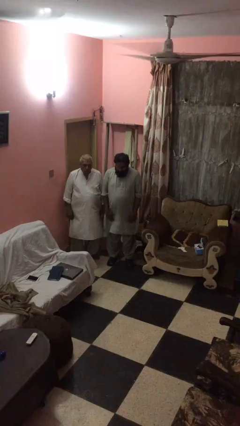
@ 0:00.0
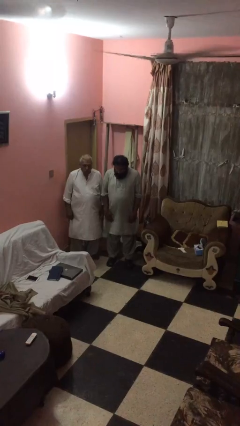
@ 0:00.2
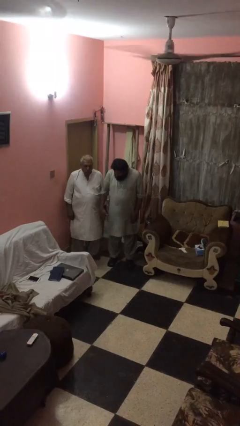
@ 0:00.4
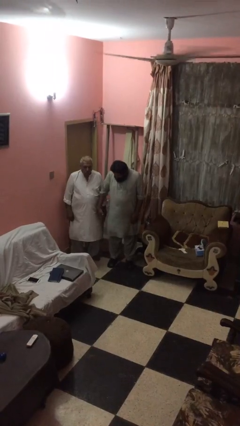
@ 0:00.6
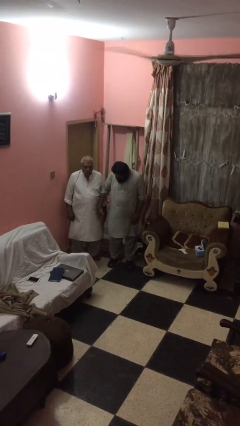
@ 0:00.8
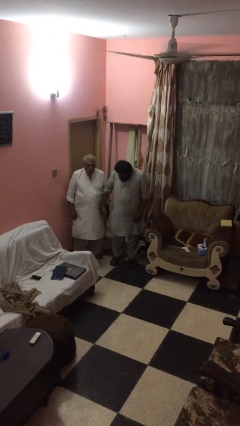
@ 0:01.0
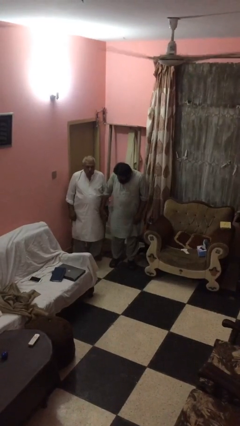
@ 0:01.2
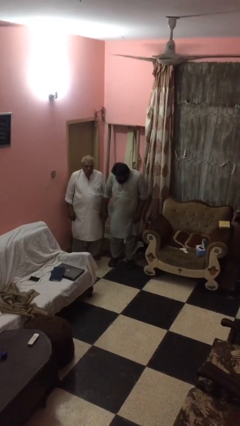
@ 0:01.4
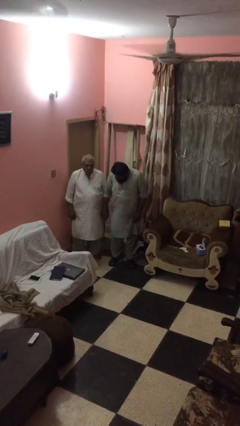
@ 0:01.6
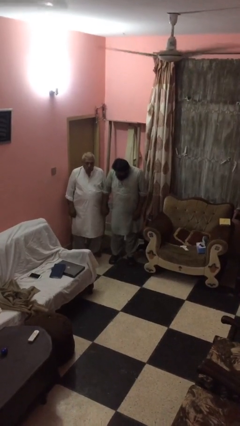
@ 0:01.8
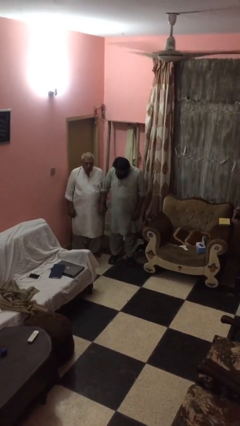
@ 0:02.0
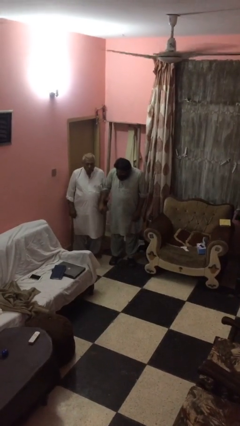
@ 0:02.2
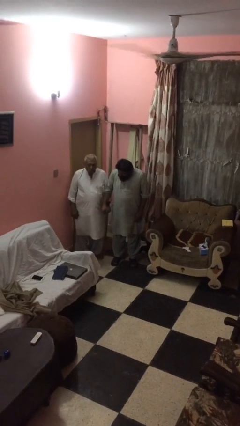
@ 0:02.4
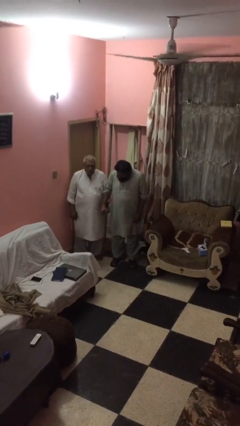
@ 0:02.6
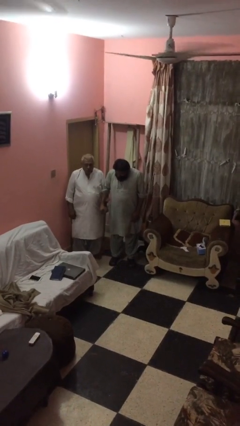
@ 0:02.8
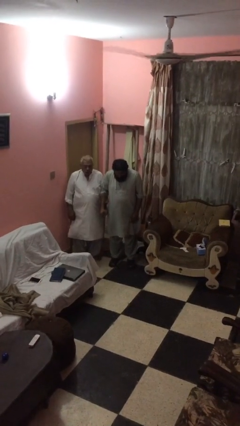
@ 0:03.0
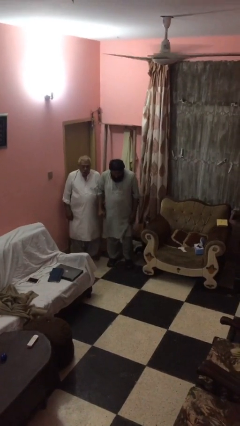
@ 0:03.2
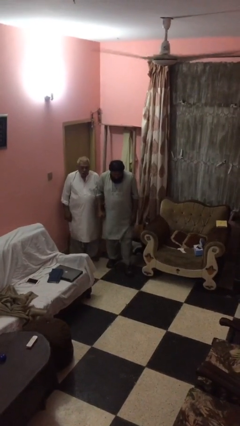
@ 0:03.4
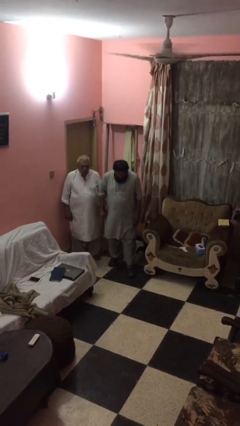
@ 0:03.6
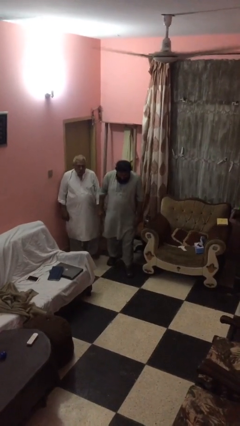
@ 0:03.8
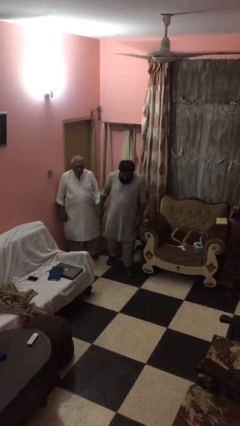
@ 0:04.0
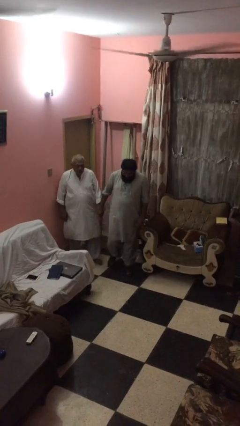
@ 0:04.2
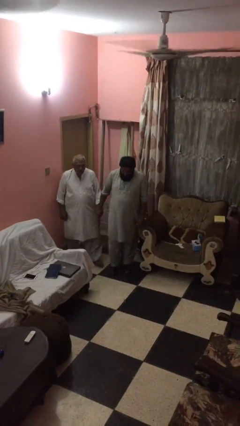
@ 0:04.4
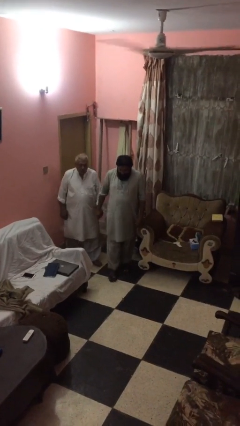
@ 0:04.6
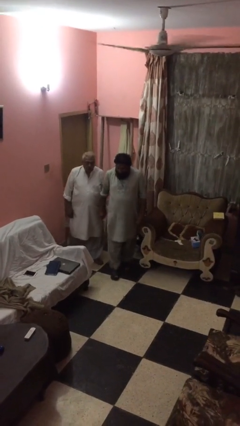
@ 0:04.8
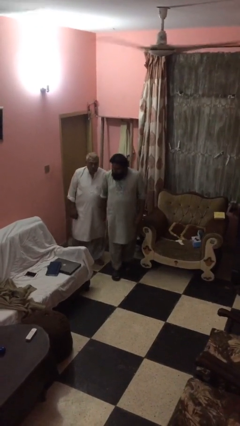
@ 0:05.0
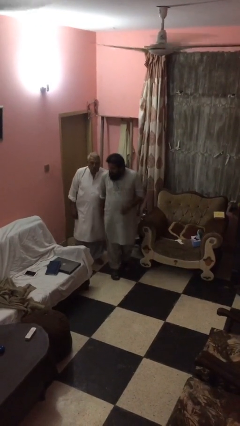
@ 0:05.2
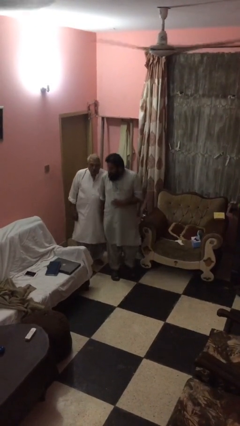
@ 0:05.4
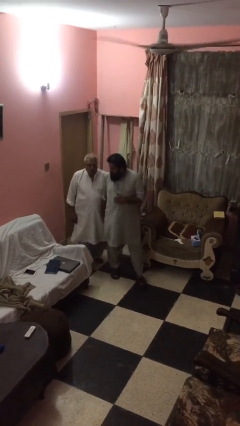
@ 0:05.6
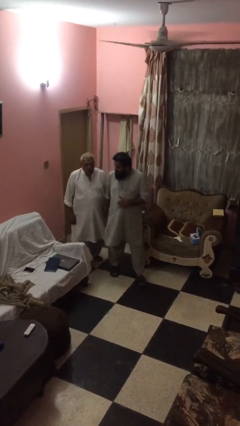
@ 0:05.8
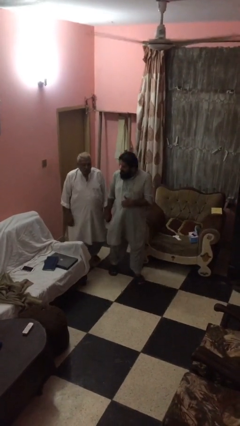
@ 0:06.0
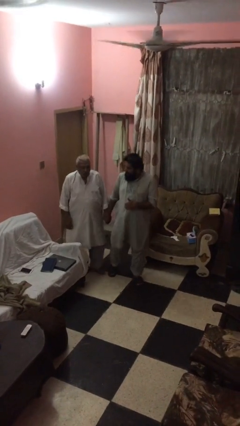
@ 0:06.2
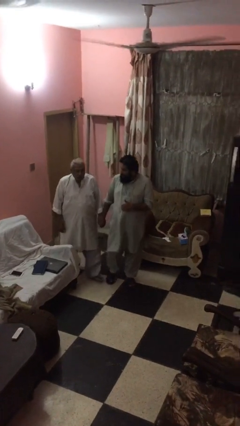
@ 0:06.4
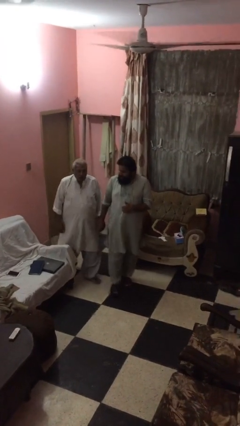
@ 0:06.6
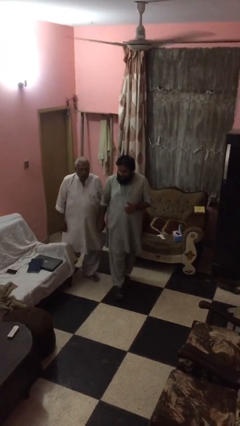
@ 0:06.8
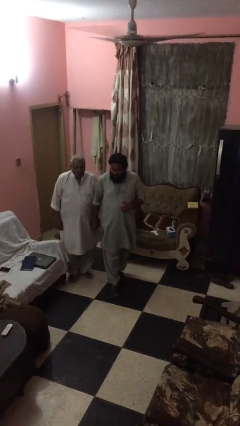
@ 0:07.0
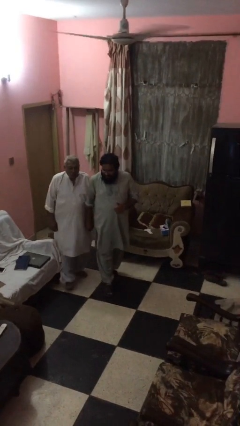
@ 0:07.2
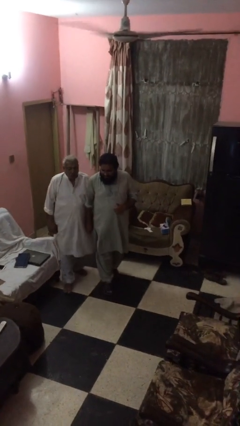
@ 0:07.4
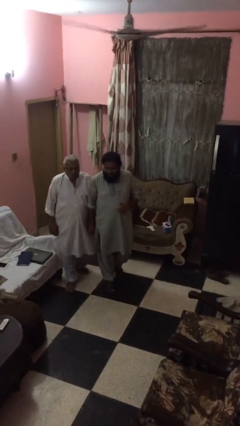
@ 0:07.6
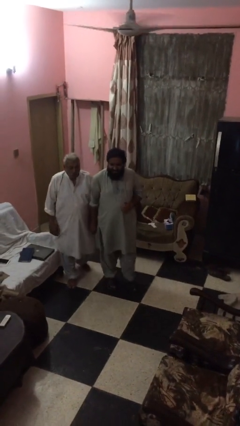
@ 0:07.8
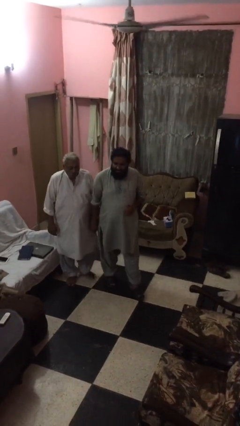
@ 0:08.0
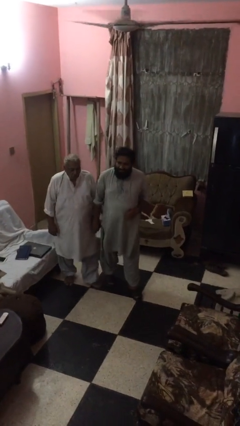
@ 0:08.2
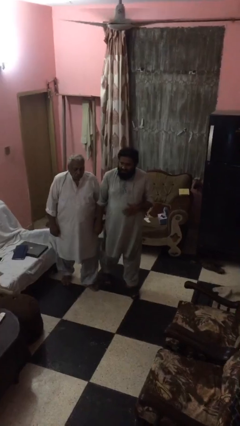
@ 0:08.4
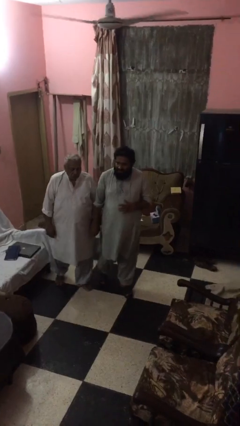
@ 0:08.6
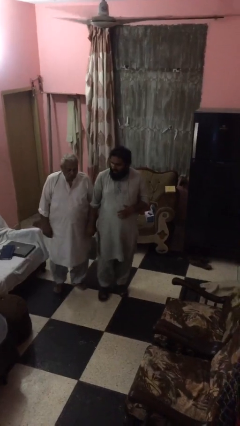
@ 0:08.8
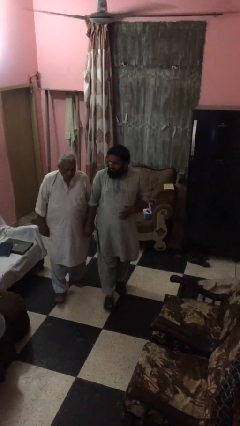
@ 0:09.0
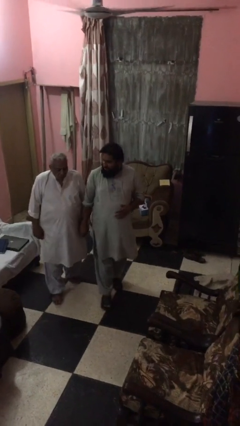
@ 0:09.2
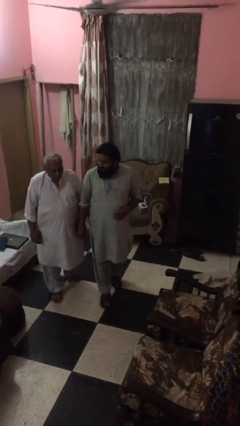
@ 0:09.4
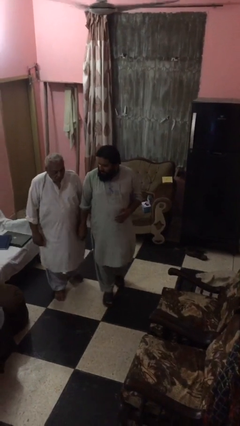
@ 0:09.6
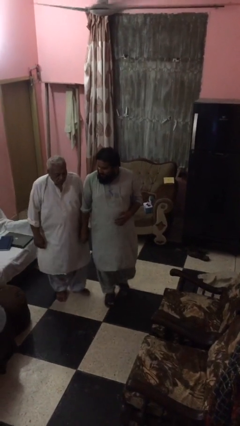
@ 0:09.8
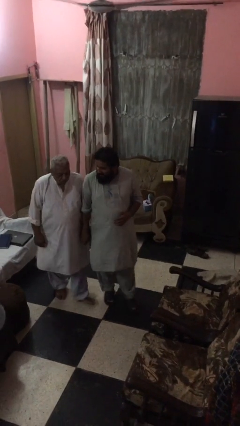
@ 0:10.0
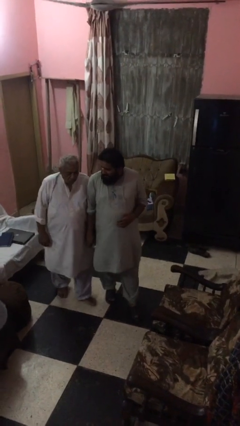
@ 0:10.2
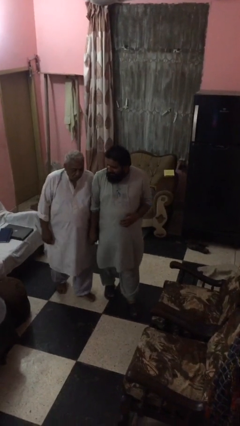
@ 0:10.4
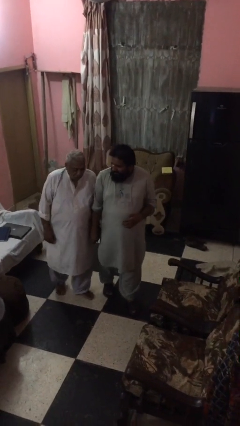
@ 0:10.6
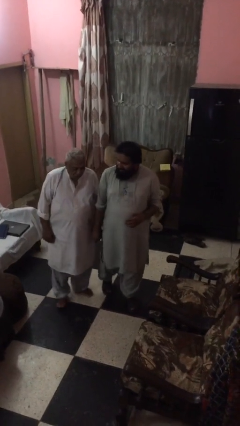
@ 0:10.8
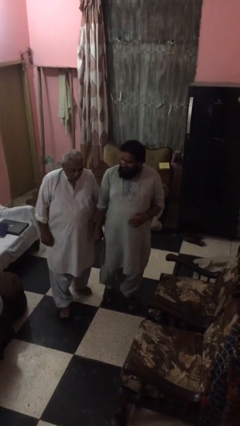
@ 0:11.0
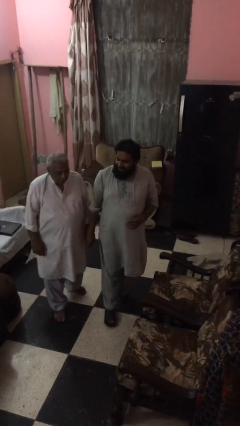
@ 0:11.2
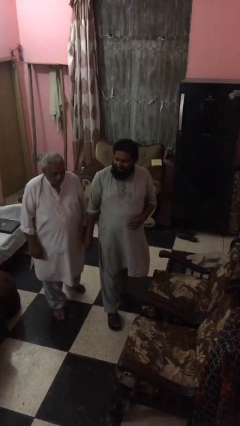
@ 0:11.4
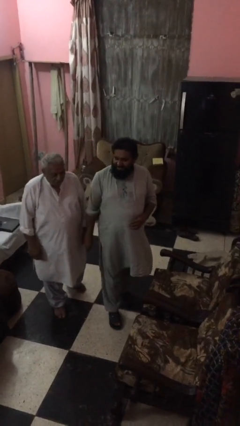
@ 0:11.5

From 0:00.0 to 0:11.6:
person holds hand

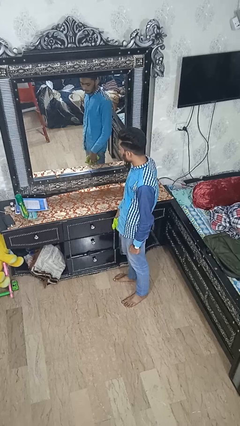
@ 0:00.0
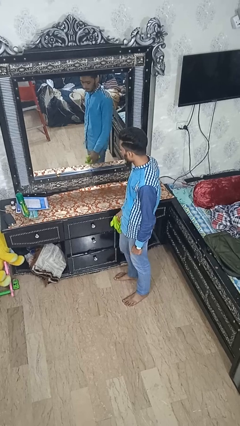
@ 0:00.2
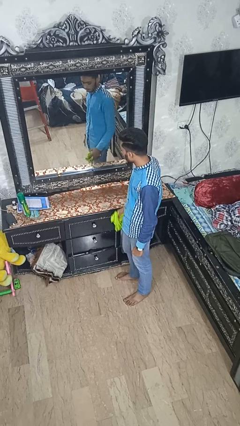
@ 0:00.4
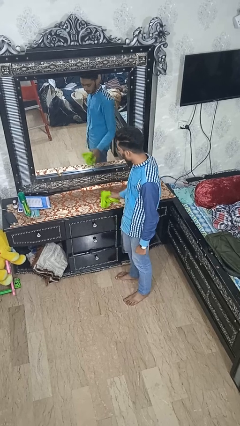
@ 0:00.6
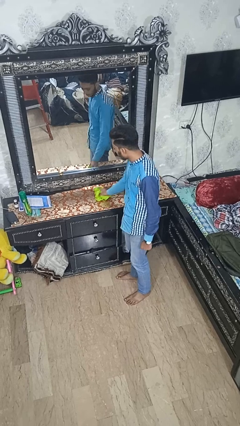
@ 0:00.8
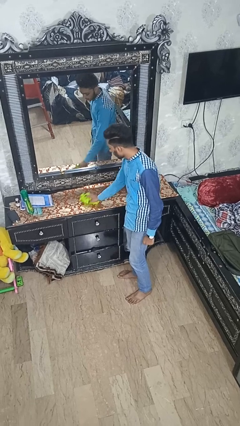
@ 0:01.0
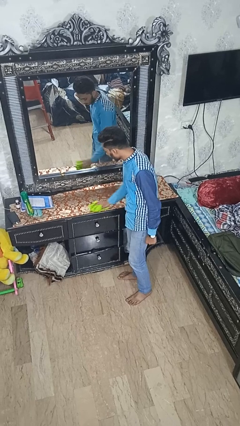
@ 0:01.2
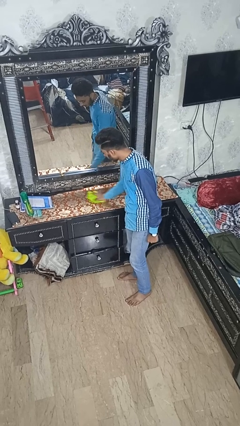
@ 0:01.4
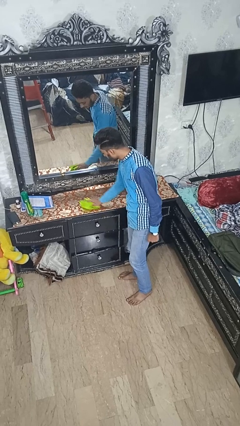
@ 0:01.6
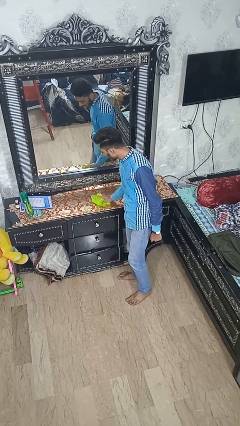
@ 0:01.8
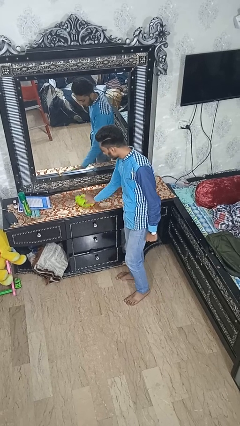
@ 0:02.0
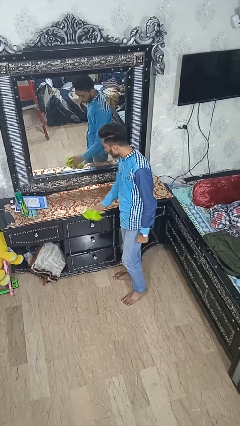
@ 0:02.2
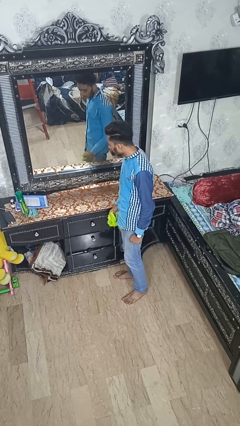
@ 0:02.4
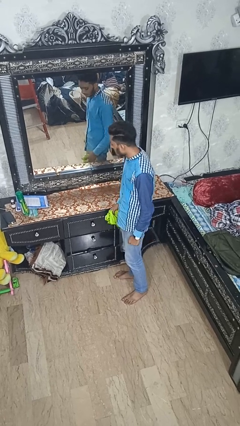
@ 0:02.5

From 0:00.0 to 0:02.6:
person cleans table with rag

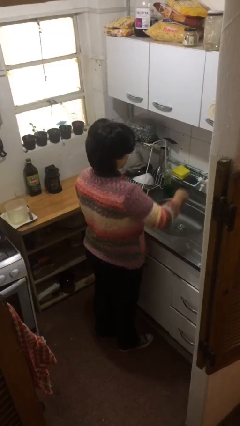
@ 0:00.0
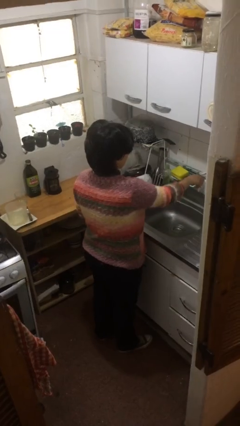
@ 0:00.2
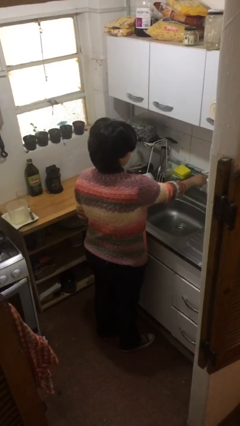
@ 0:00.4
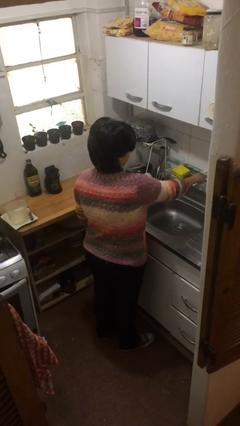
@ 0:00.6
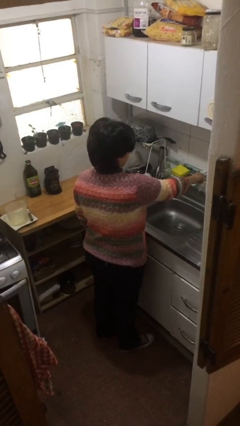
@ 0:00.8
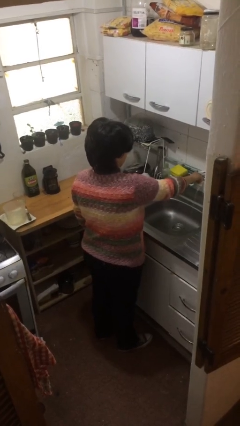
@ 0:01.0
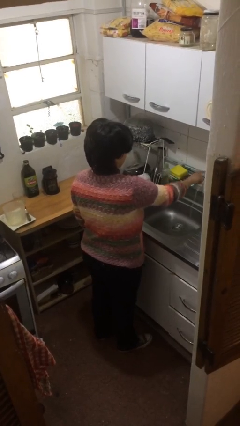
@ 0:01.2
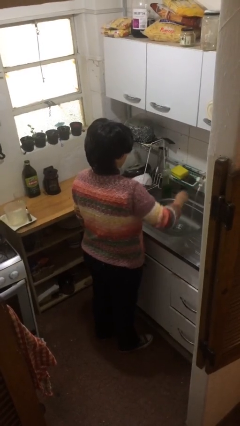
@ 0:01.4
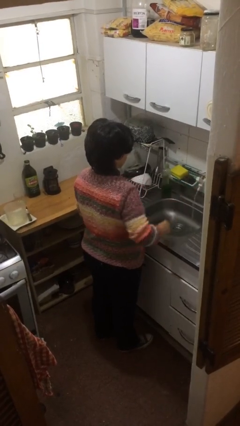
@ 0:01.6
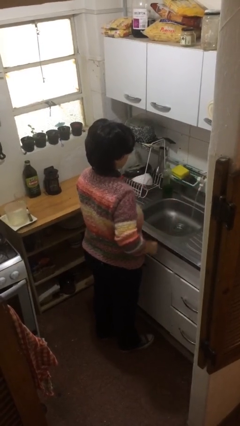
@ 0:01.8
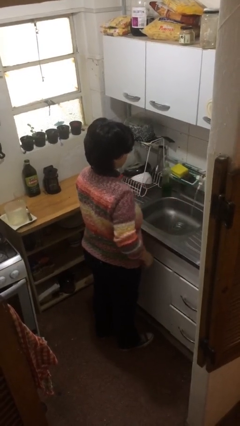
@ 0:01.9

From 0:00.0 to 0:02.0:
person turns on faucet

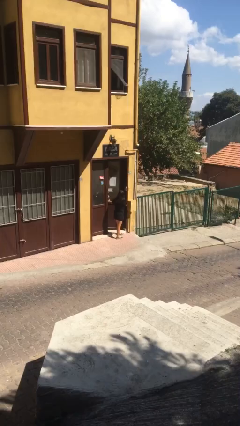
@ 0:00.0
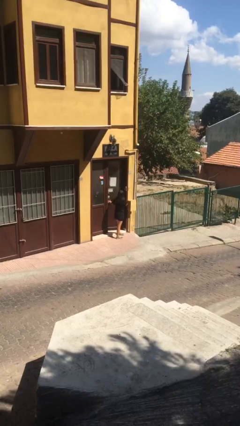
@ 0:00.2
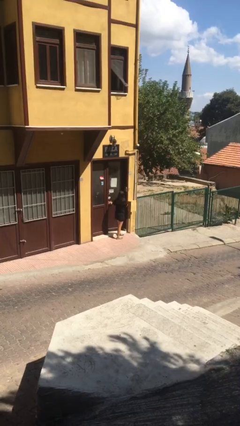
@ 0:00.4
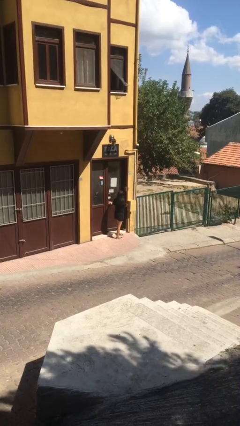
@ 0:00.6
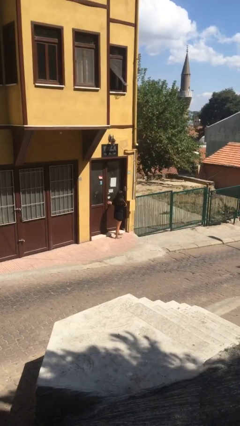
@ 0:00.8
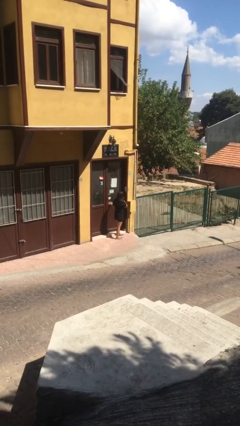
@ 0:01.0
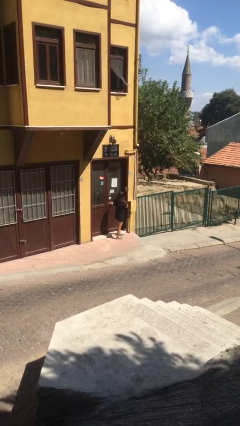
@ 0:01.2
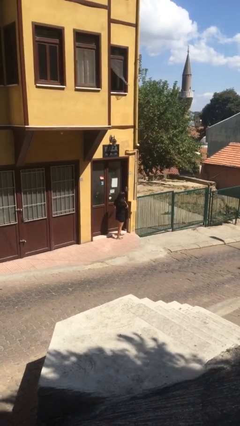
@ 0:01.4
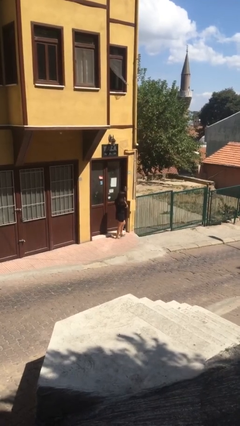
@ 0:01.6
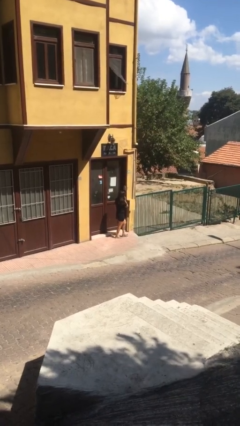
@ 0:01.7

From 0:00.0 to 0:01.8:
person closes facility door
